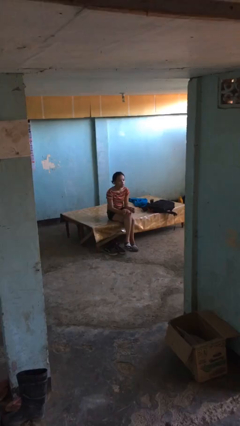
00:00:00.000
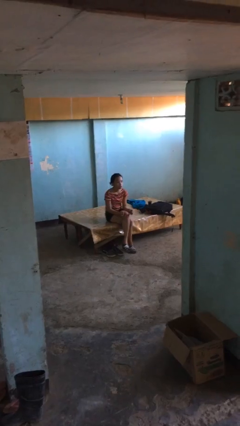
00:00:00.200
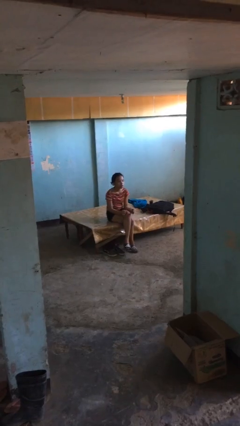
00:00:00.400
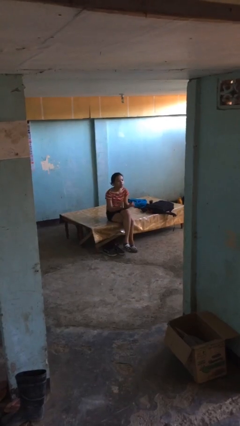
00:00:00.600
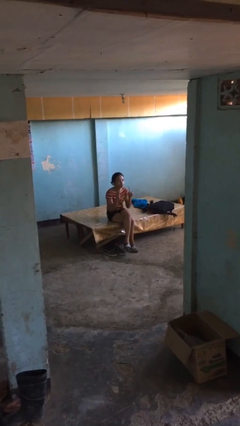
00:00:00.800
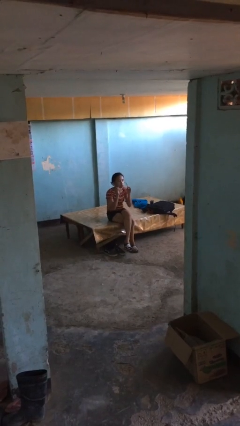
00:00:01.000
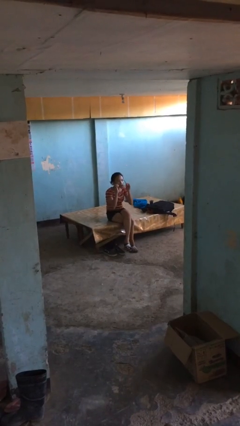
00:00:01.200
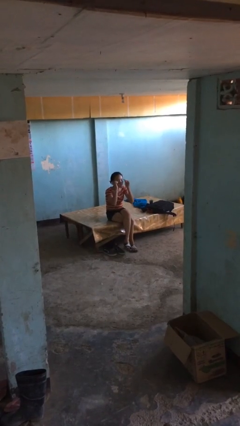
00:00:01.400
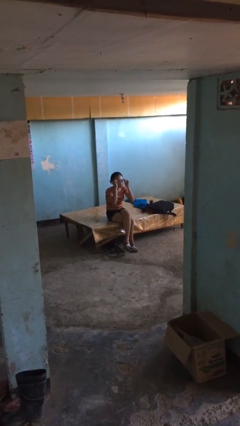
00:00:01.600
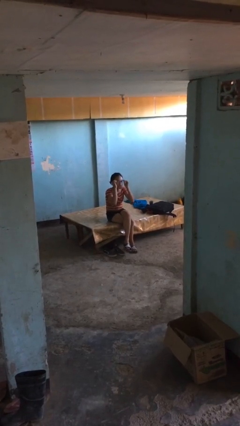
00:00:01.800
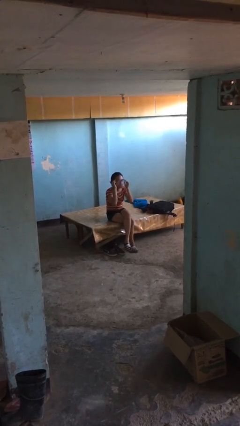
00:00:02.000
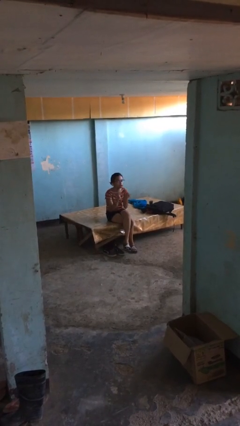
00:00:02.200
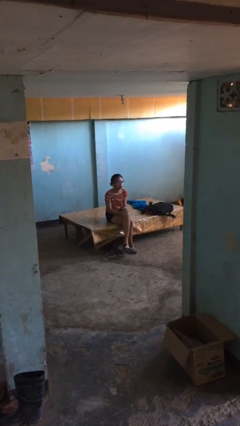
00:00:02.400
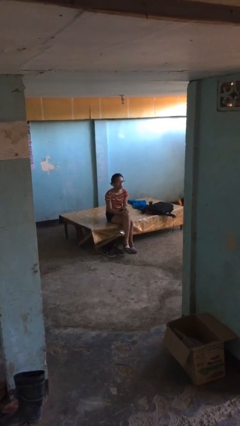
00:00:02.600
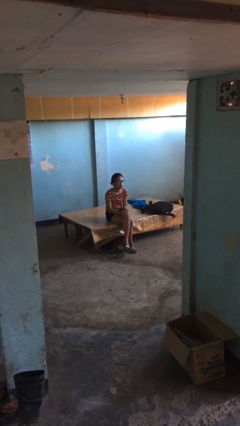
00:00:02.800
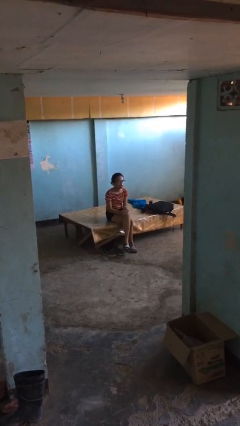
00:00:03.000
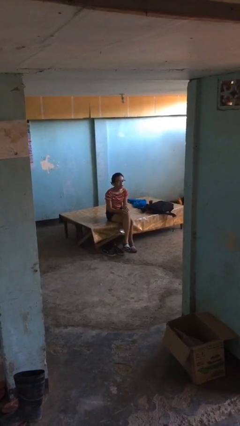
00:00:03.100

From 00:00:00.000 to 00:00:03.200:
person puts on glasses

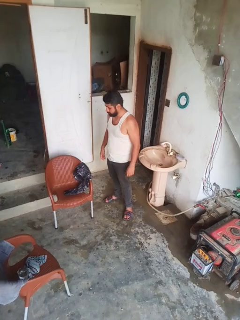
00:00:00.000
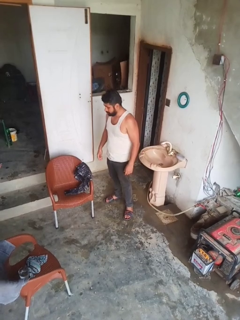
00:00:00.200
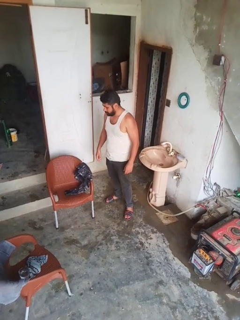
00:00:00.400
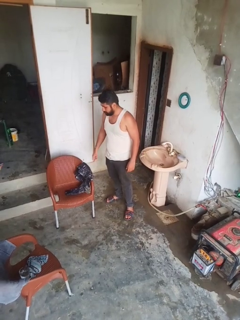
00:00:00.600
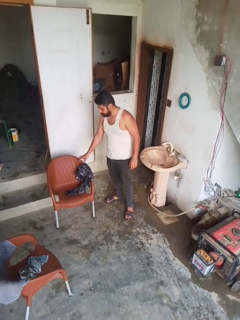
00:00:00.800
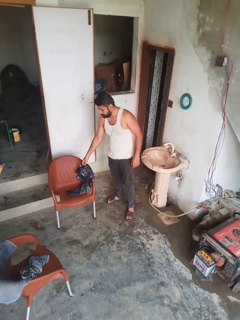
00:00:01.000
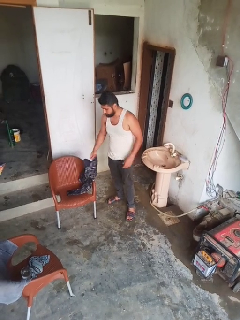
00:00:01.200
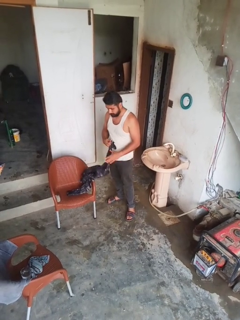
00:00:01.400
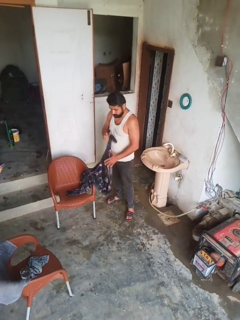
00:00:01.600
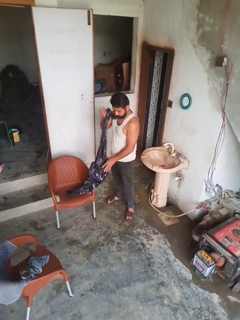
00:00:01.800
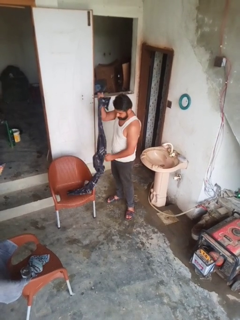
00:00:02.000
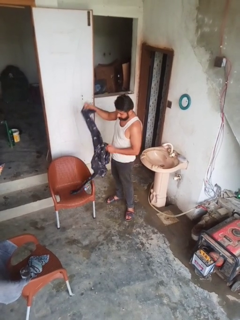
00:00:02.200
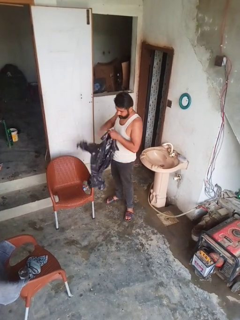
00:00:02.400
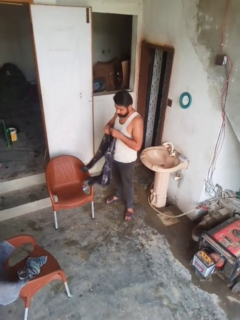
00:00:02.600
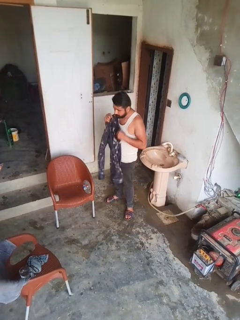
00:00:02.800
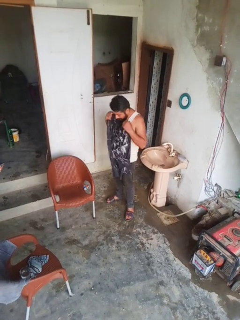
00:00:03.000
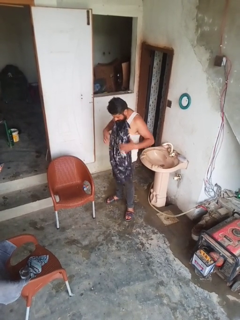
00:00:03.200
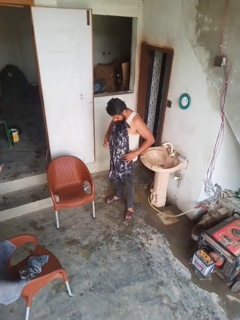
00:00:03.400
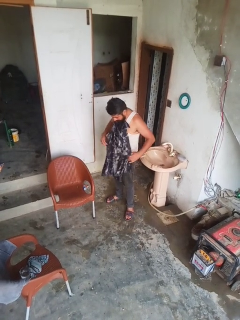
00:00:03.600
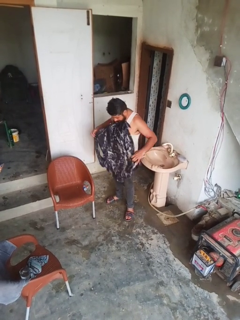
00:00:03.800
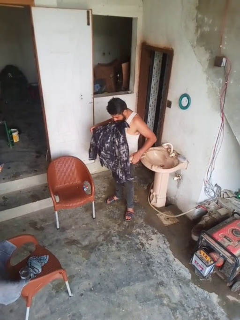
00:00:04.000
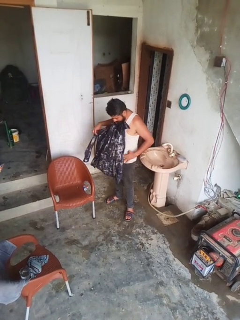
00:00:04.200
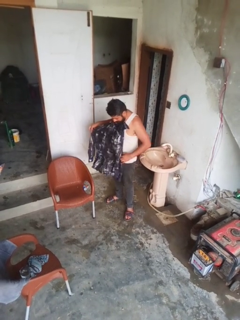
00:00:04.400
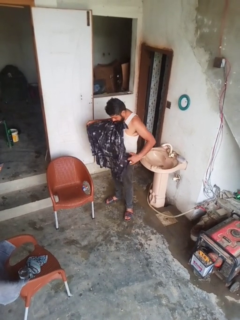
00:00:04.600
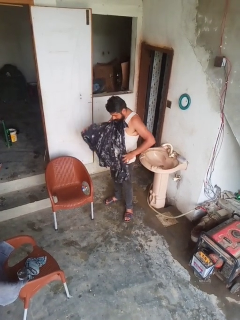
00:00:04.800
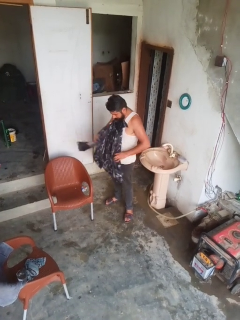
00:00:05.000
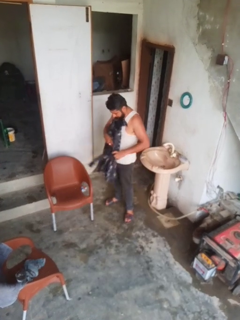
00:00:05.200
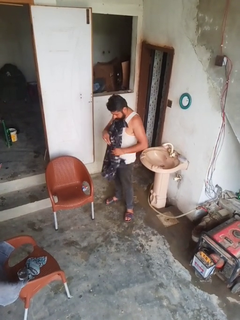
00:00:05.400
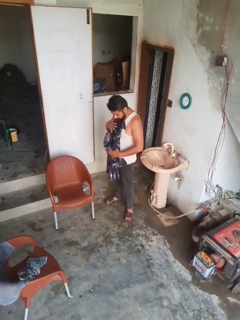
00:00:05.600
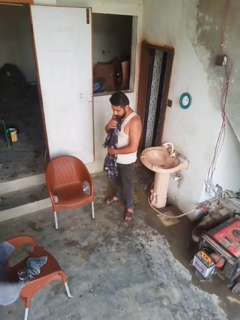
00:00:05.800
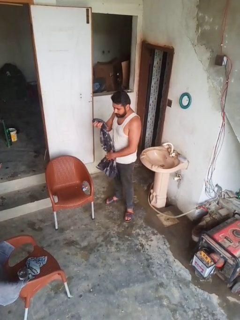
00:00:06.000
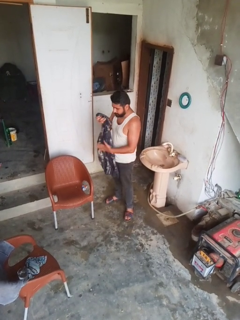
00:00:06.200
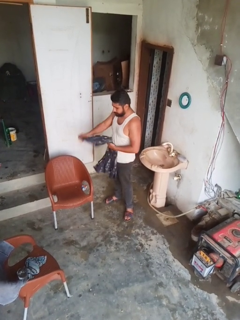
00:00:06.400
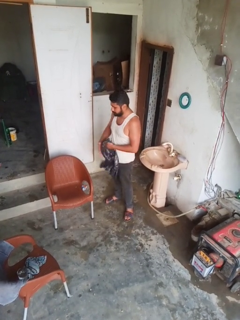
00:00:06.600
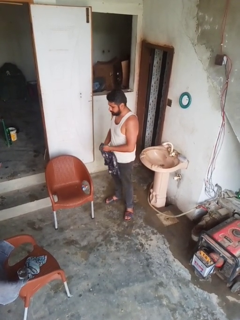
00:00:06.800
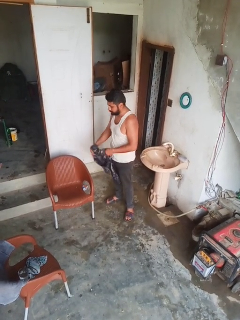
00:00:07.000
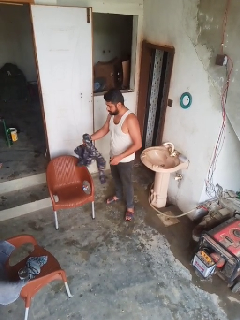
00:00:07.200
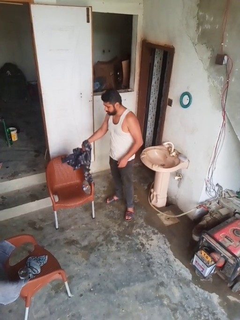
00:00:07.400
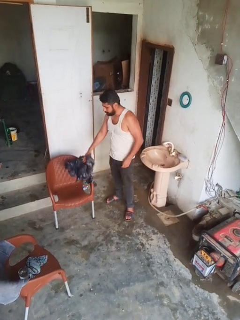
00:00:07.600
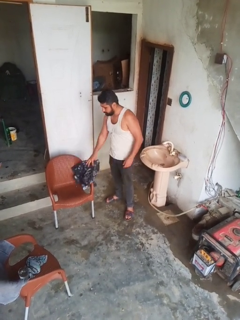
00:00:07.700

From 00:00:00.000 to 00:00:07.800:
person folds shirt

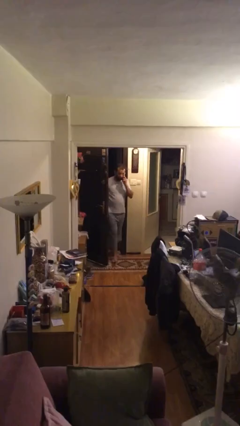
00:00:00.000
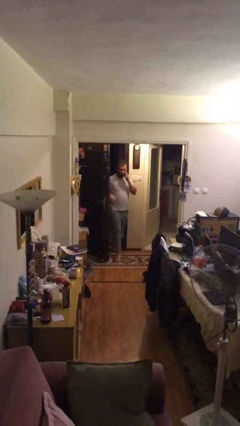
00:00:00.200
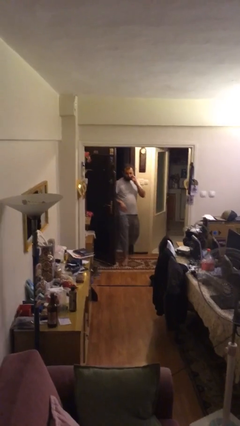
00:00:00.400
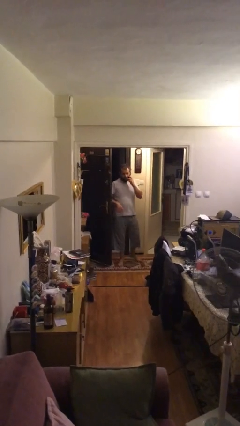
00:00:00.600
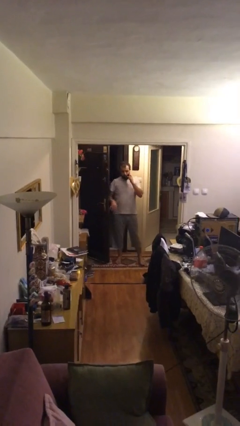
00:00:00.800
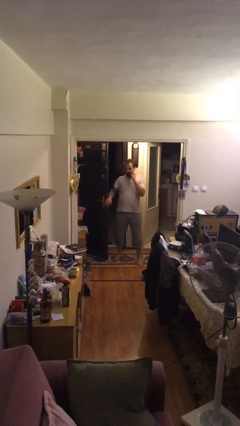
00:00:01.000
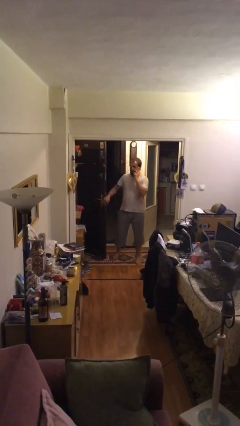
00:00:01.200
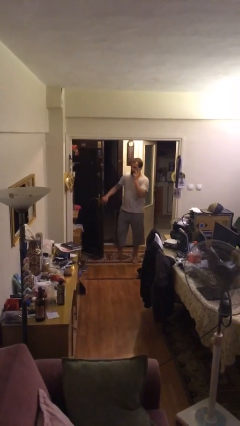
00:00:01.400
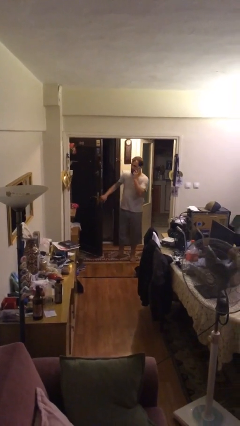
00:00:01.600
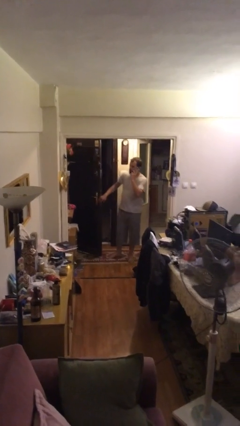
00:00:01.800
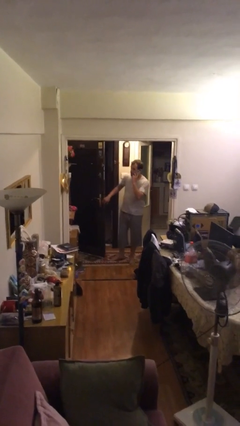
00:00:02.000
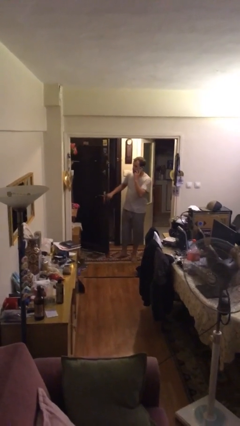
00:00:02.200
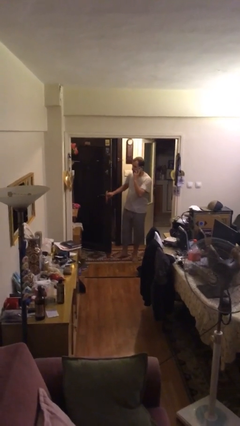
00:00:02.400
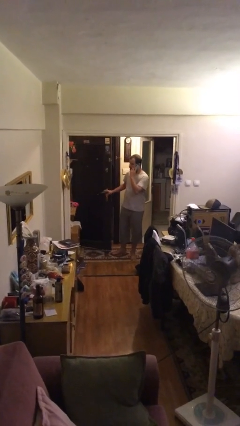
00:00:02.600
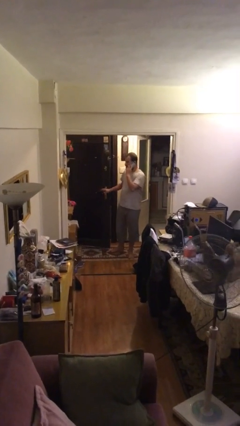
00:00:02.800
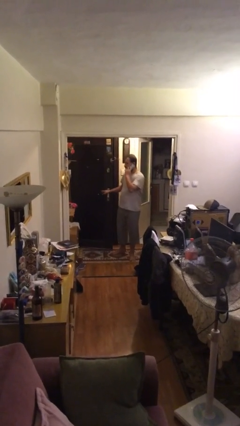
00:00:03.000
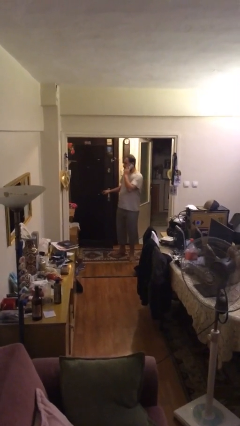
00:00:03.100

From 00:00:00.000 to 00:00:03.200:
person enters scene through structure

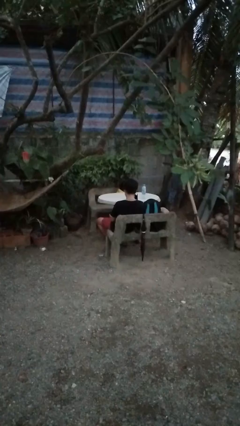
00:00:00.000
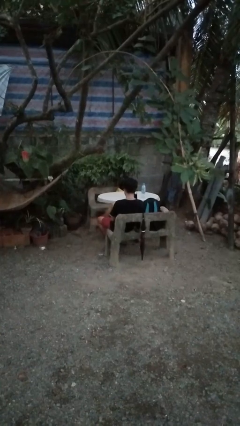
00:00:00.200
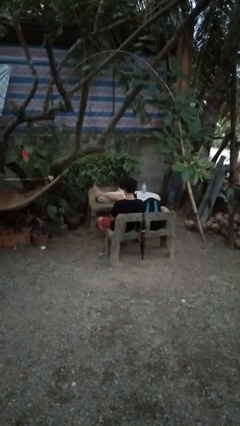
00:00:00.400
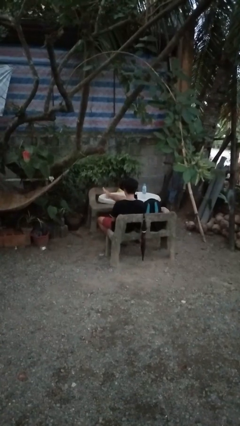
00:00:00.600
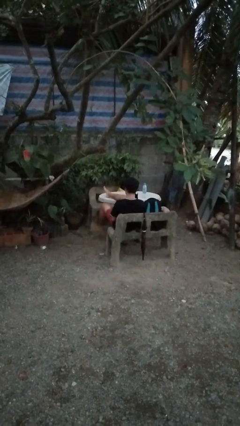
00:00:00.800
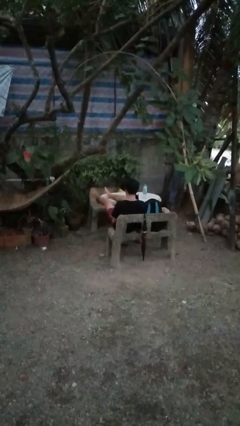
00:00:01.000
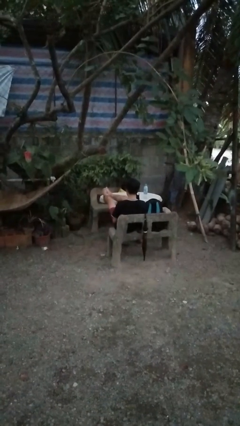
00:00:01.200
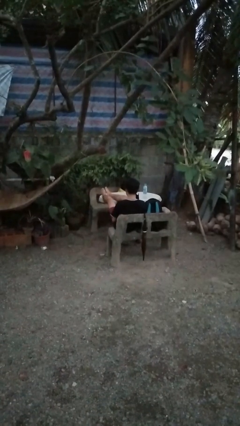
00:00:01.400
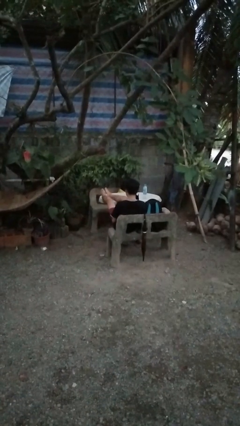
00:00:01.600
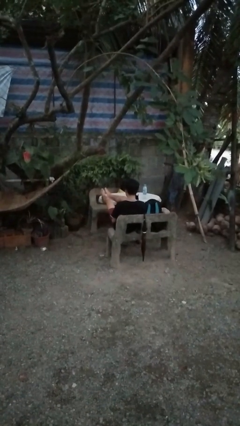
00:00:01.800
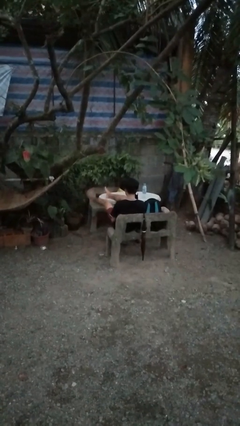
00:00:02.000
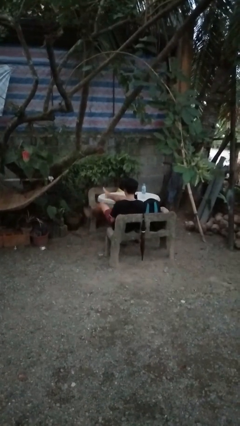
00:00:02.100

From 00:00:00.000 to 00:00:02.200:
person puts feet up

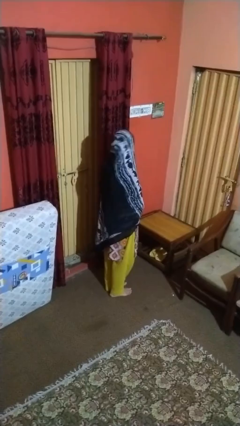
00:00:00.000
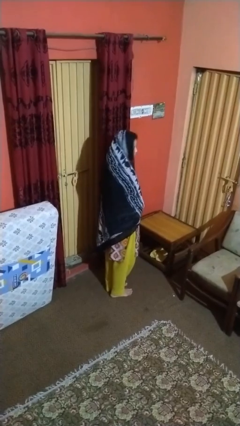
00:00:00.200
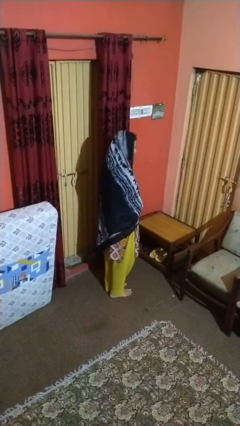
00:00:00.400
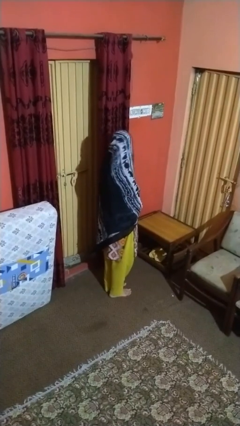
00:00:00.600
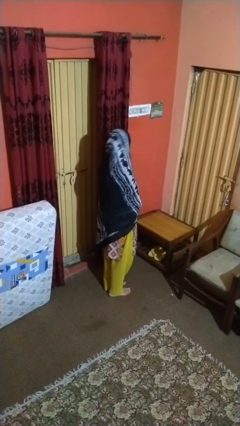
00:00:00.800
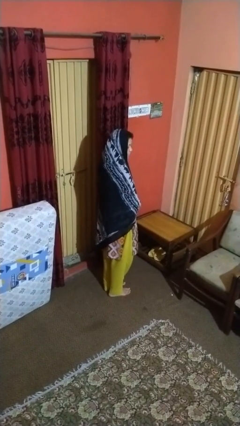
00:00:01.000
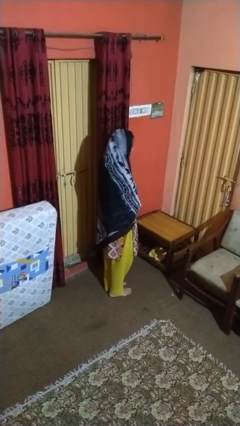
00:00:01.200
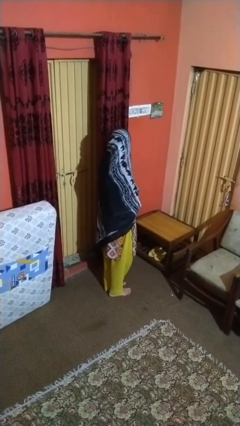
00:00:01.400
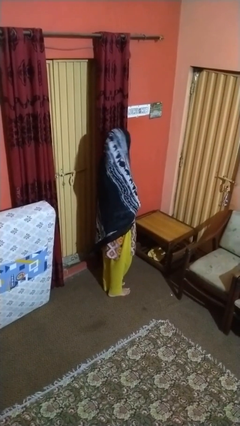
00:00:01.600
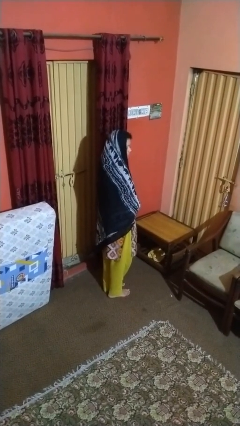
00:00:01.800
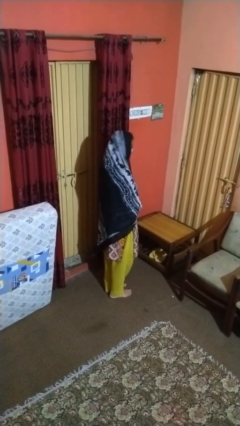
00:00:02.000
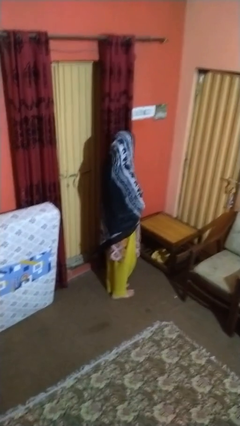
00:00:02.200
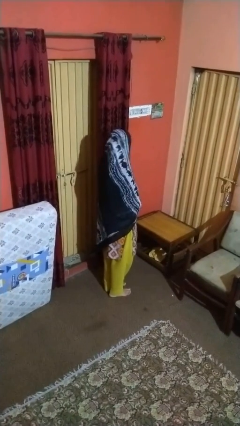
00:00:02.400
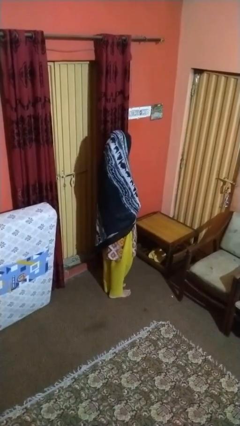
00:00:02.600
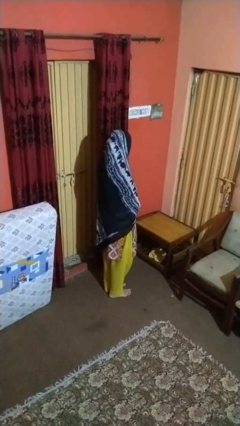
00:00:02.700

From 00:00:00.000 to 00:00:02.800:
person shakes head
